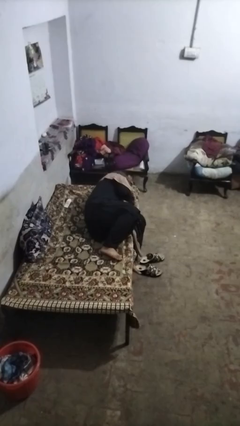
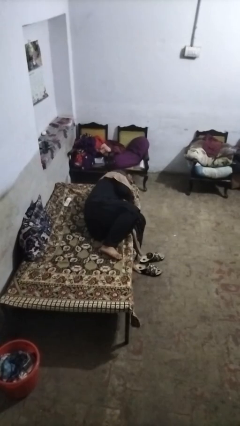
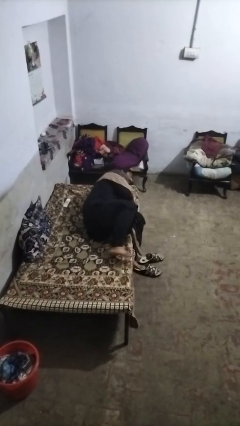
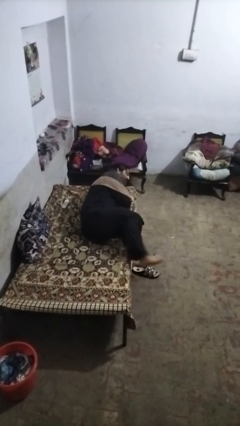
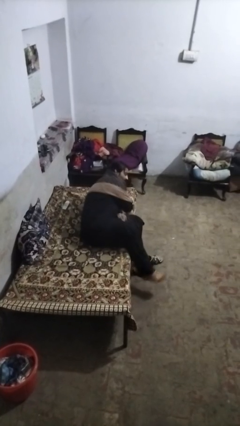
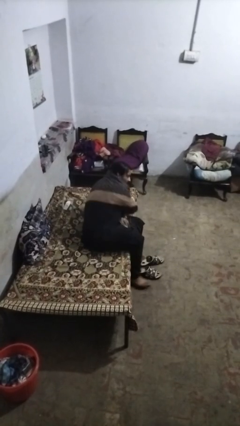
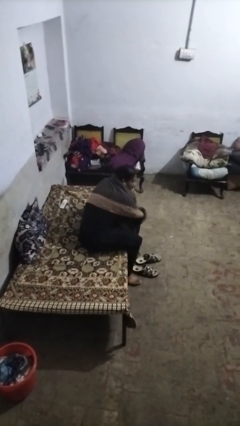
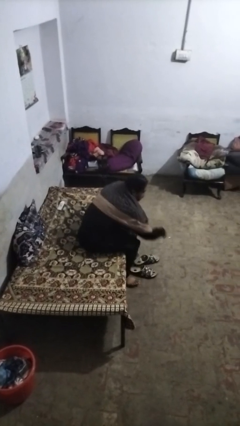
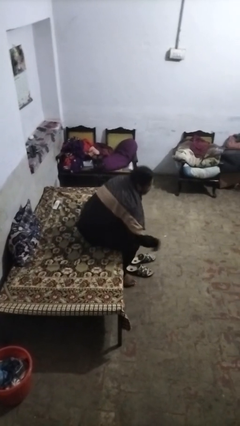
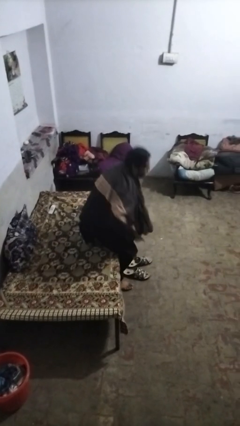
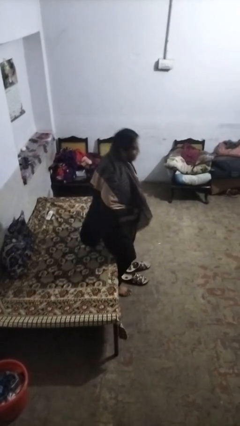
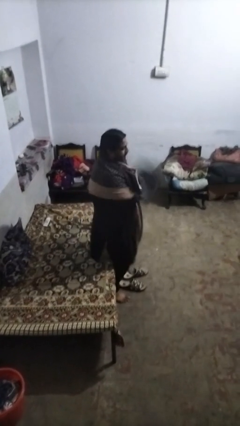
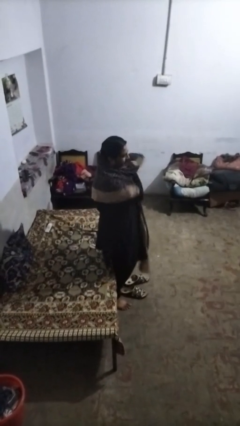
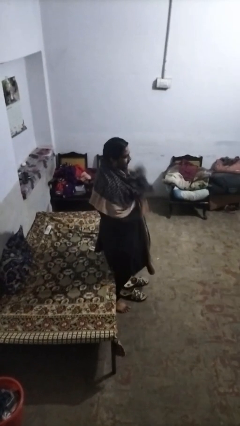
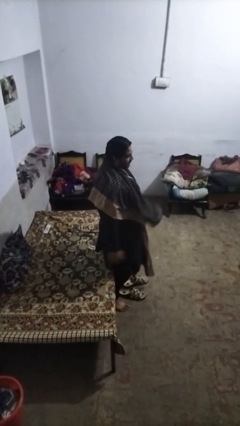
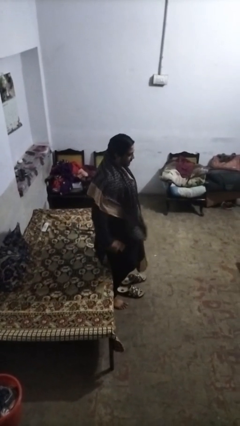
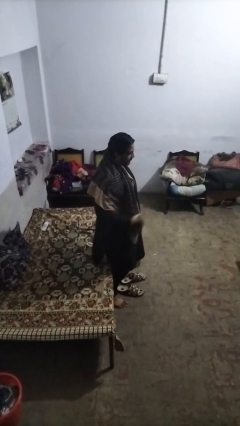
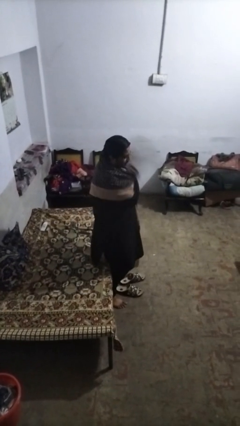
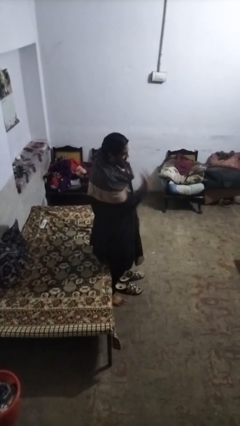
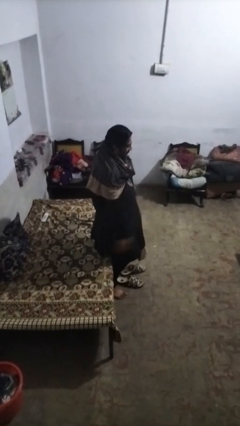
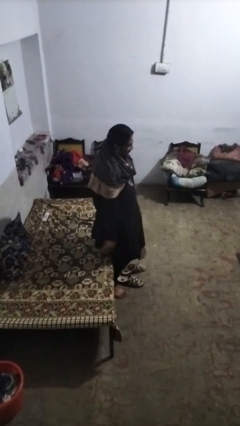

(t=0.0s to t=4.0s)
person stands up

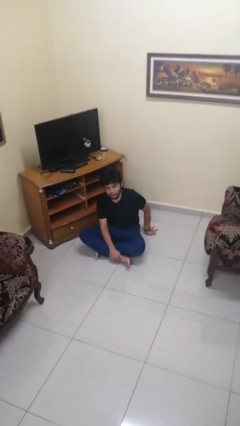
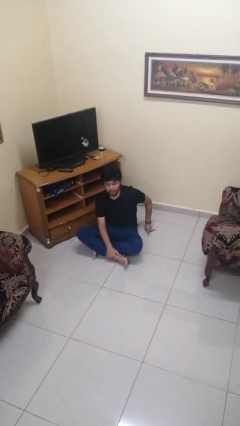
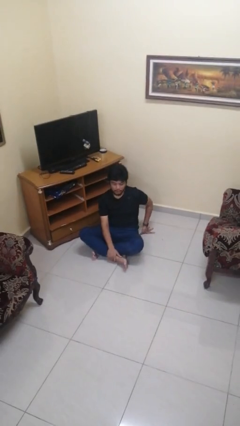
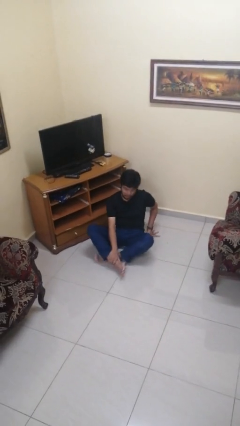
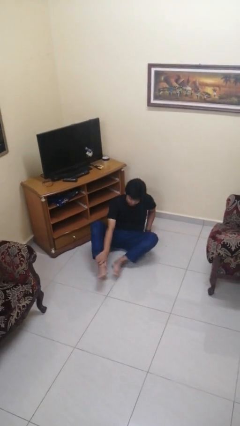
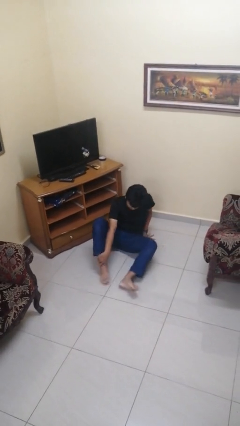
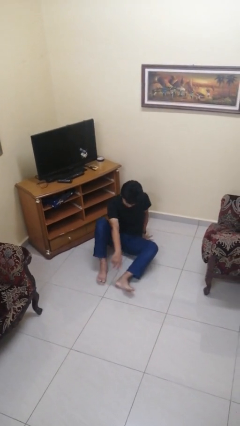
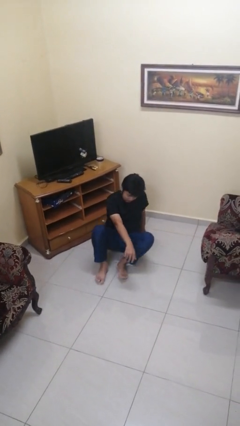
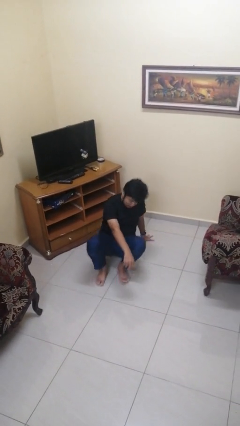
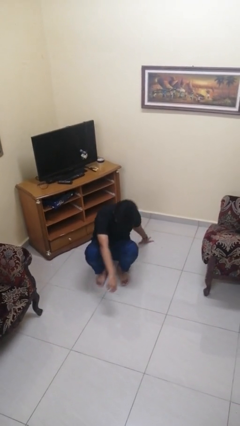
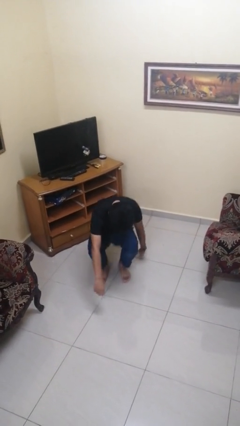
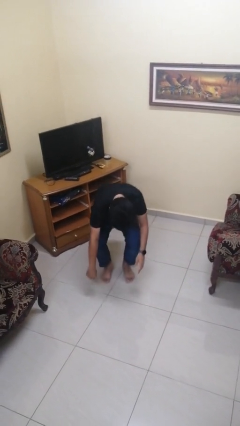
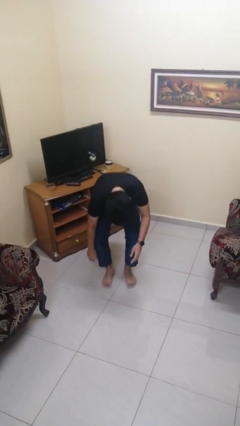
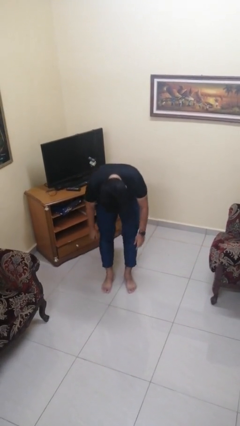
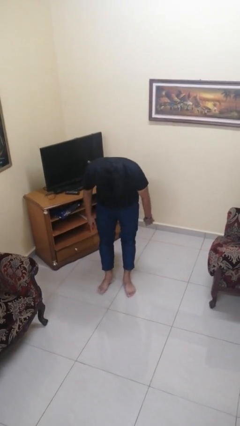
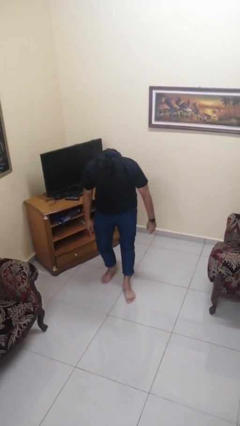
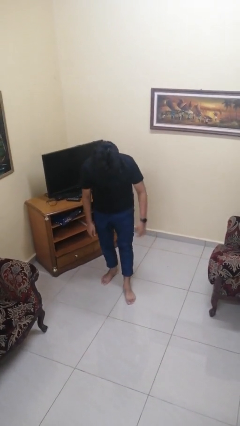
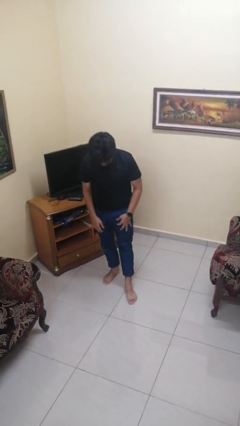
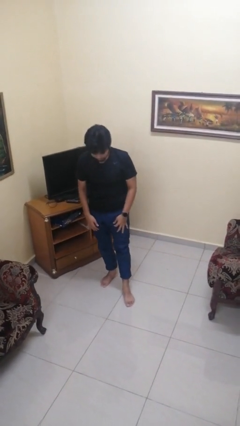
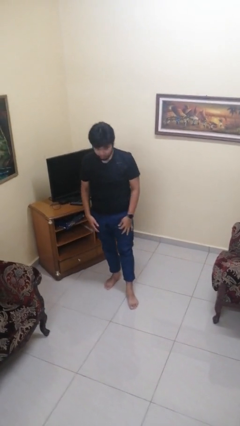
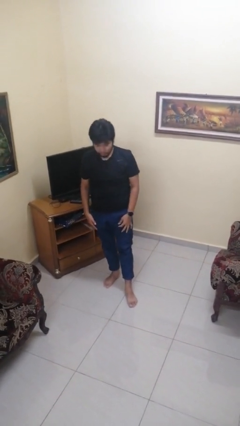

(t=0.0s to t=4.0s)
person stands up from floor

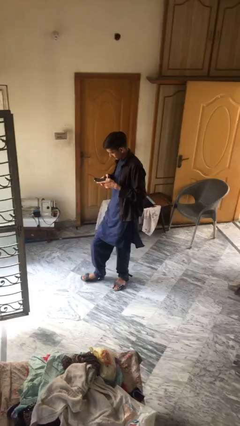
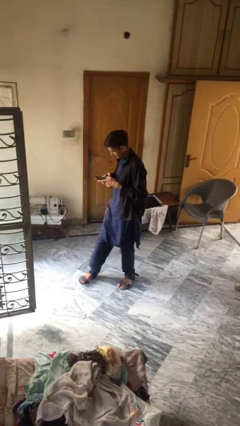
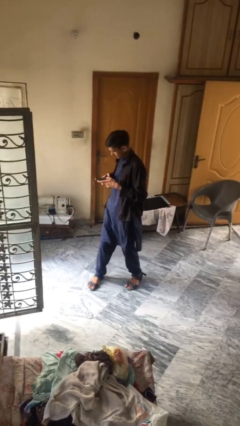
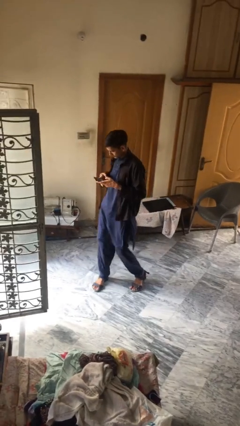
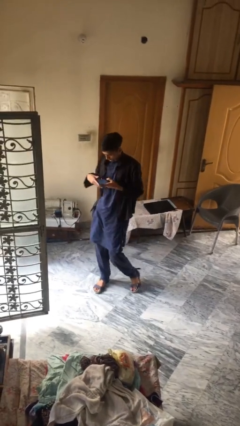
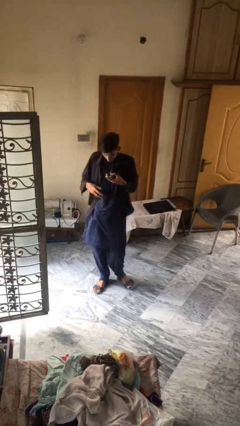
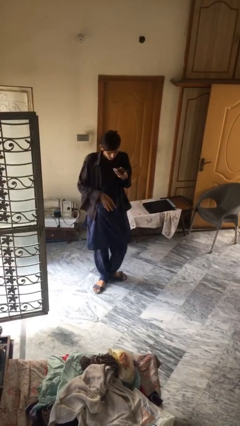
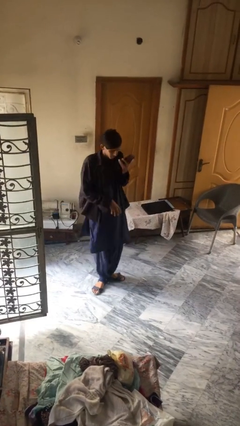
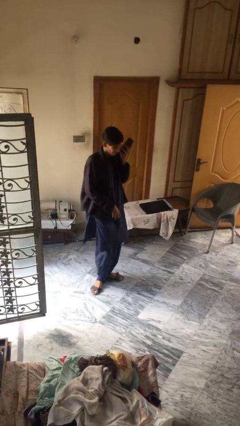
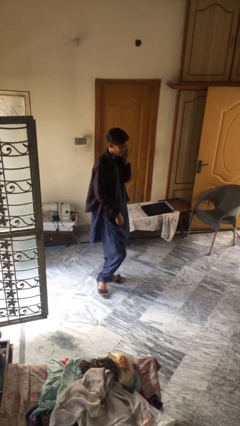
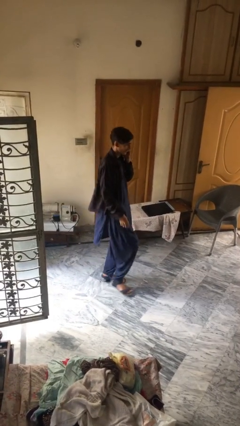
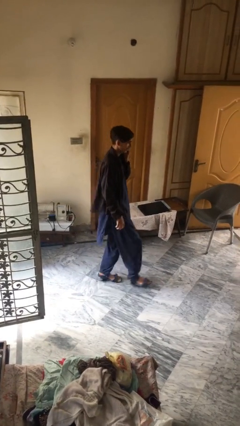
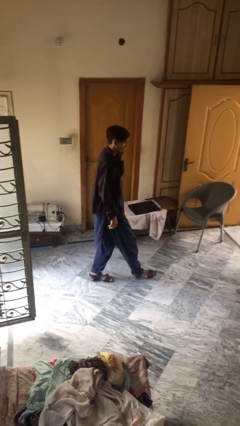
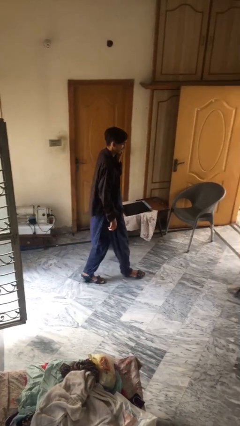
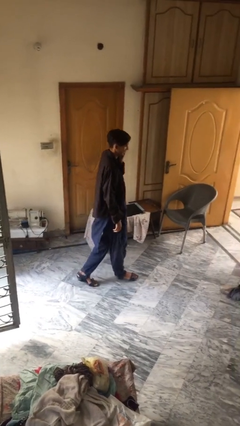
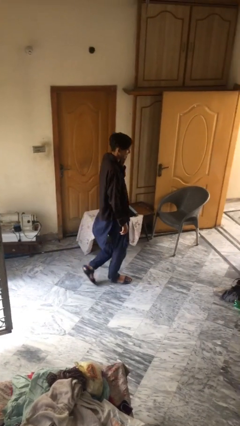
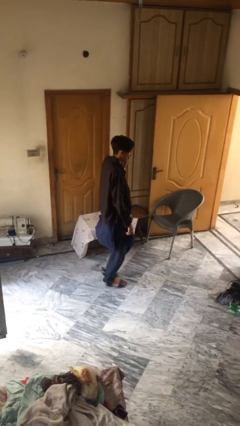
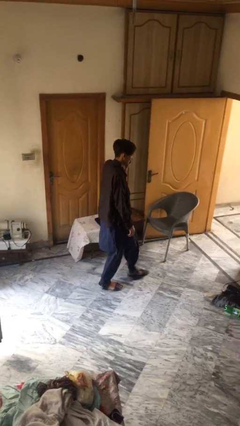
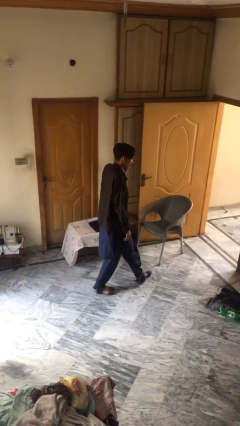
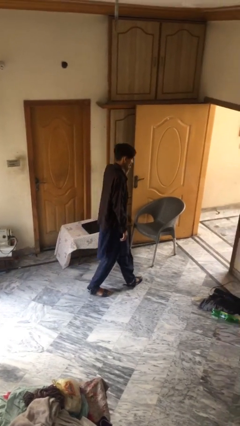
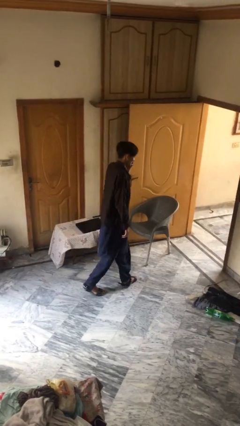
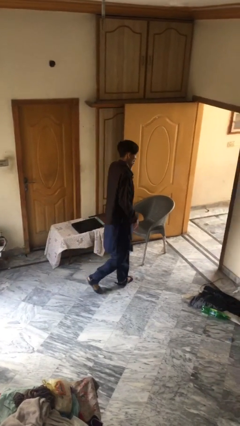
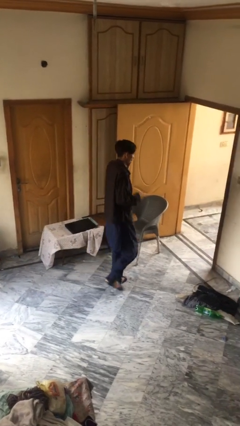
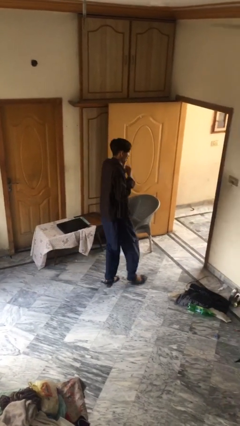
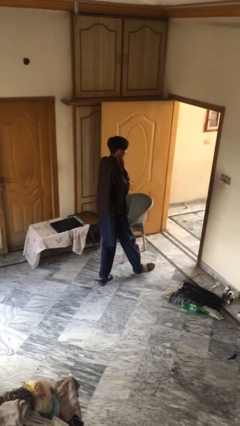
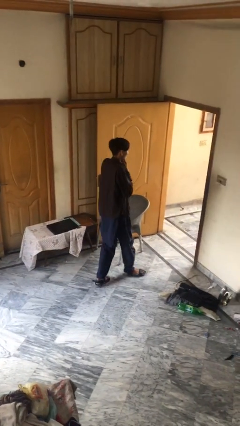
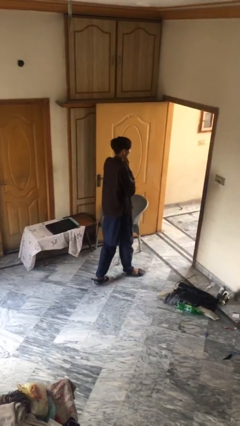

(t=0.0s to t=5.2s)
person talks on phone

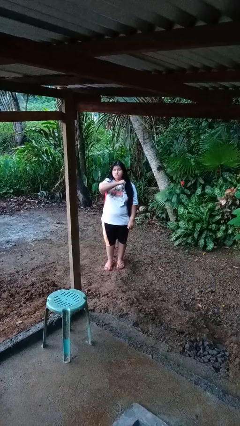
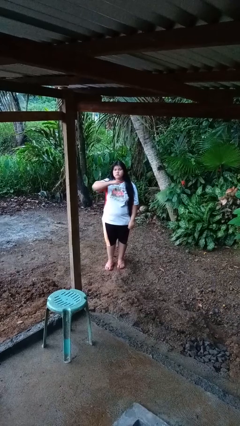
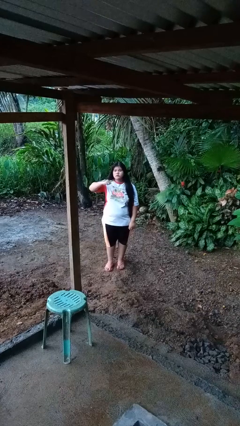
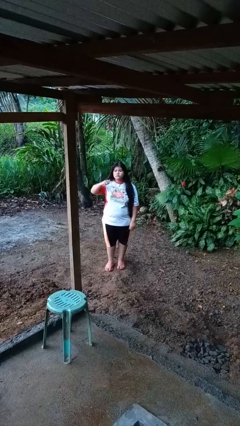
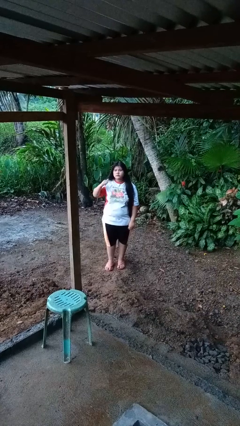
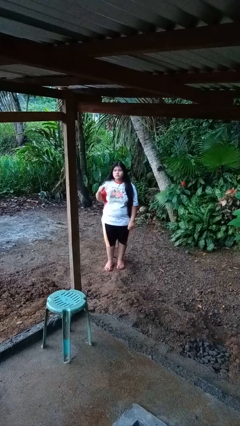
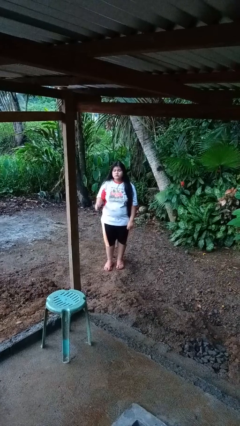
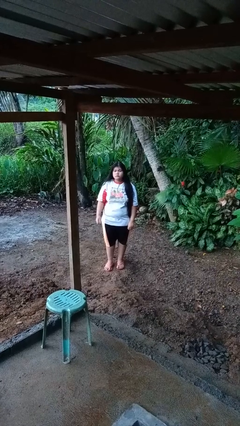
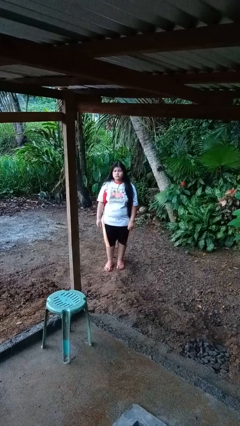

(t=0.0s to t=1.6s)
person gestures cut

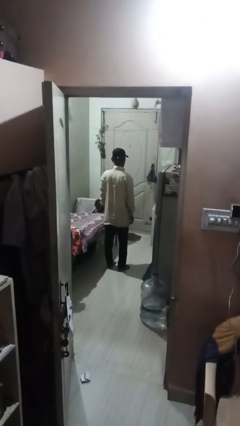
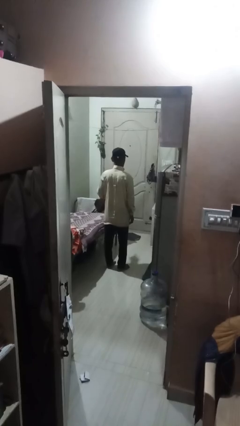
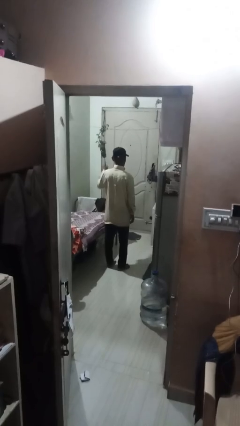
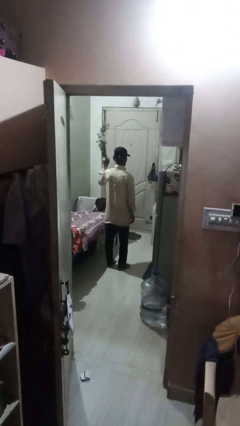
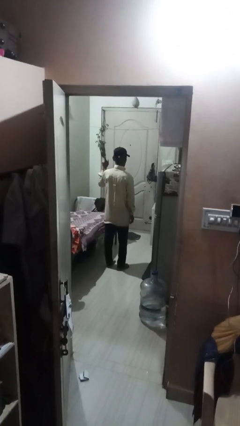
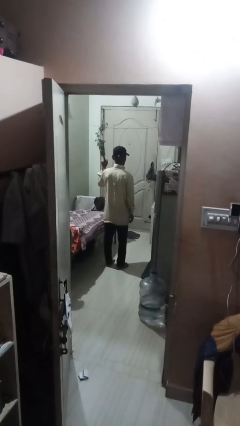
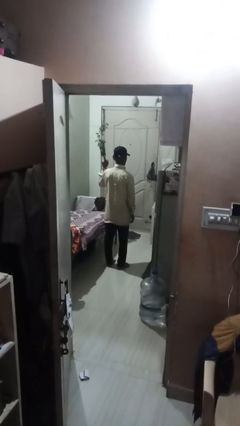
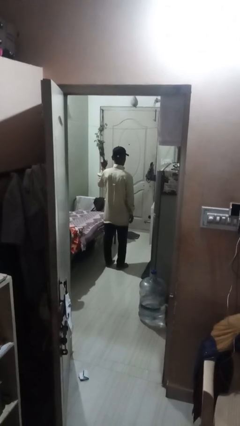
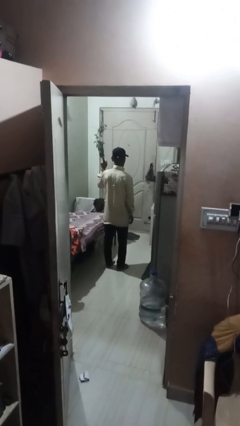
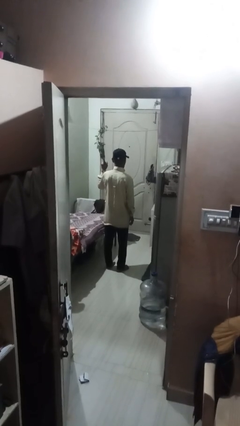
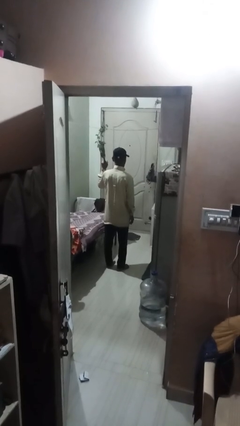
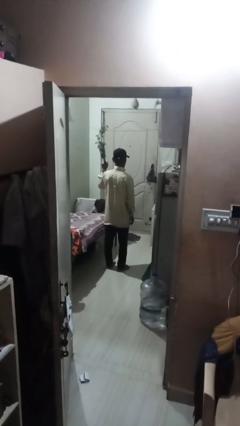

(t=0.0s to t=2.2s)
person gestures number one

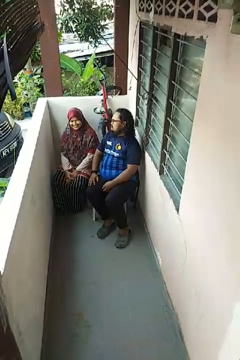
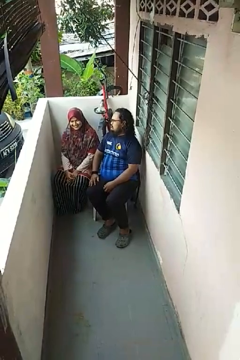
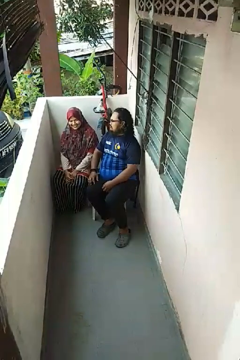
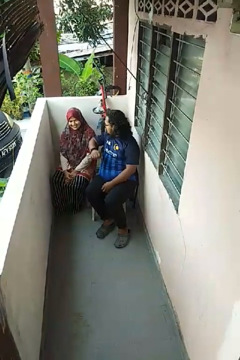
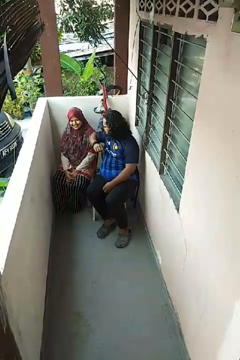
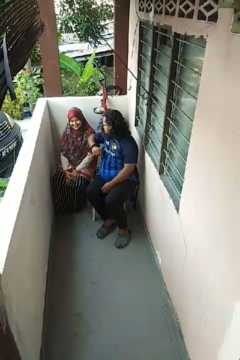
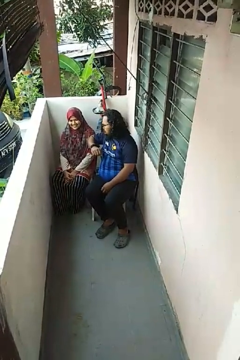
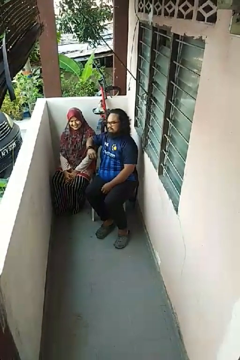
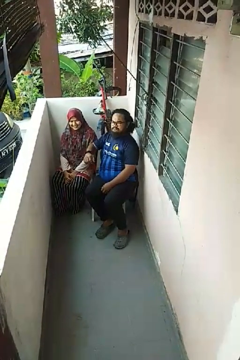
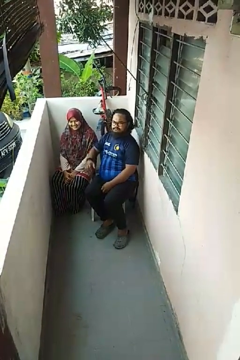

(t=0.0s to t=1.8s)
person nudges person with elbow
